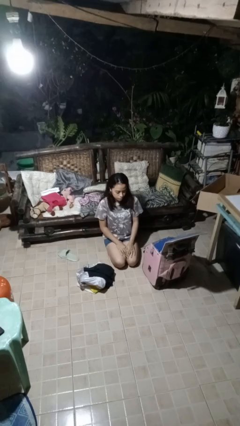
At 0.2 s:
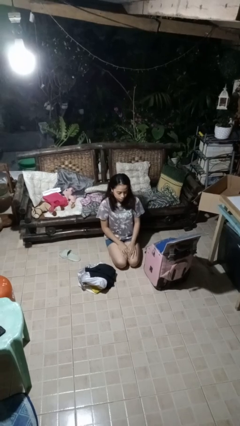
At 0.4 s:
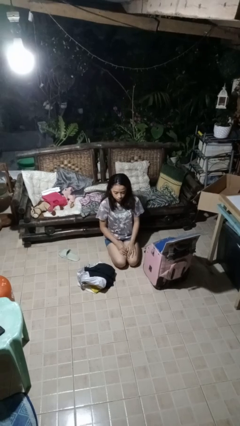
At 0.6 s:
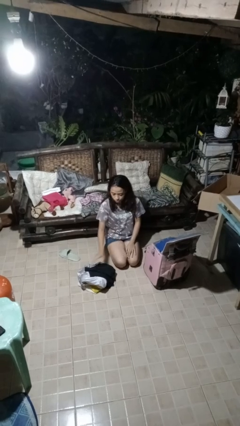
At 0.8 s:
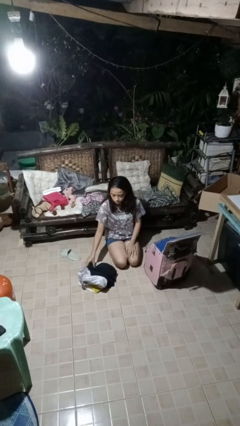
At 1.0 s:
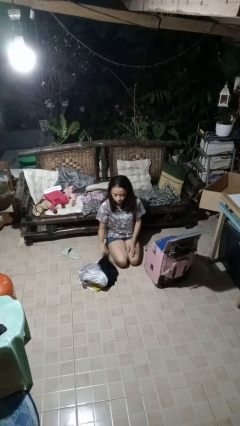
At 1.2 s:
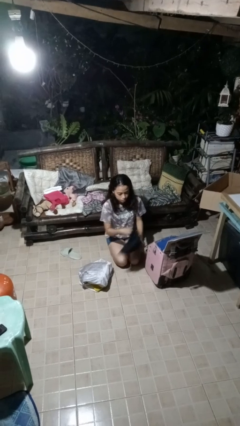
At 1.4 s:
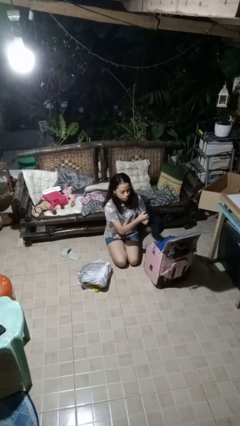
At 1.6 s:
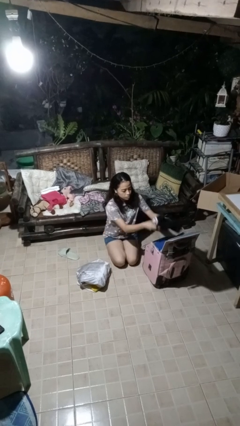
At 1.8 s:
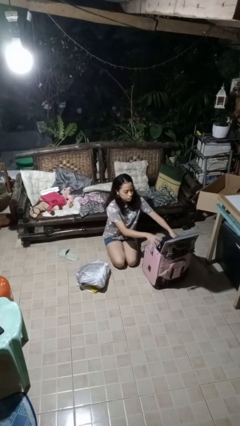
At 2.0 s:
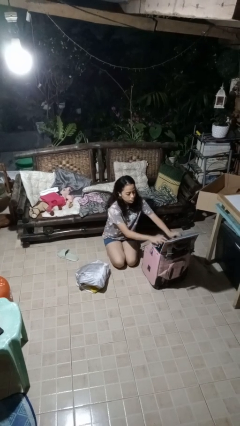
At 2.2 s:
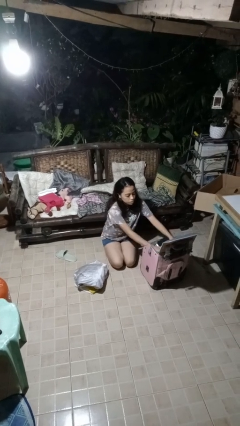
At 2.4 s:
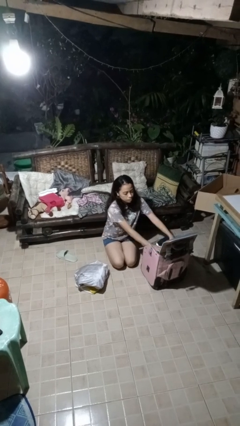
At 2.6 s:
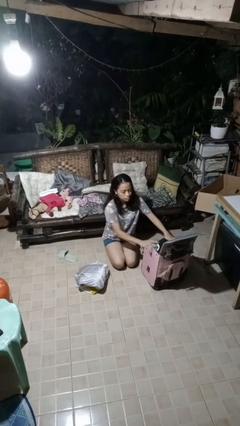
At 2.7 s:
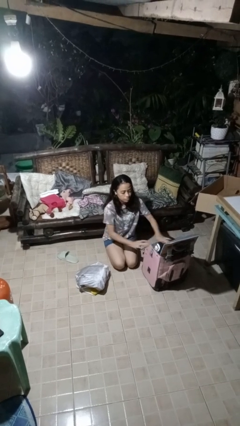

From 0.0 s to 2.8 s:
person loads clothes into suitcase

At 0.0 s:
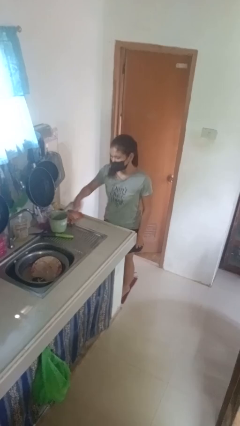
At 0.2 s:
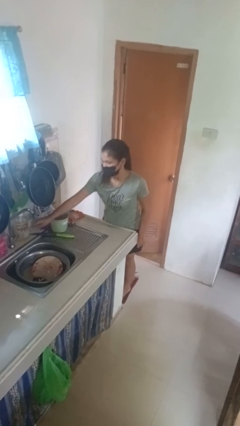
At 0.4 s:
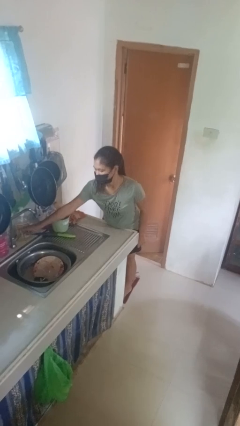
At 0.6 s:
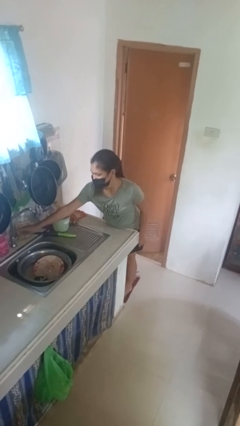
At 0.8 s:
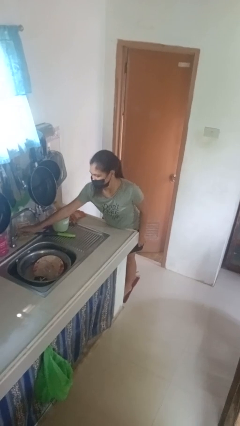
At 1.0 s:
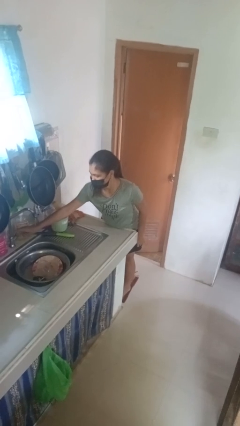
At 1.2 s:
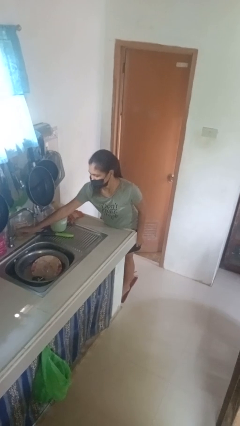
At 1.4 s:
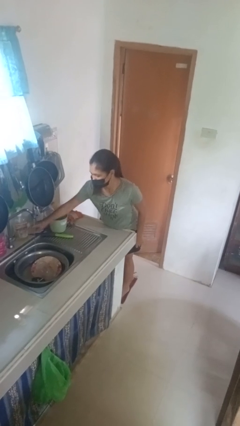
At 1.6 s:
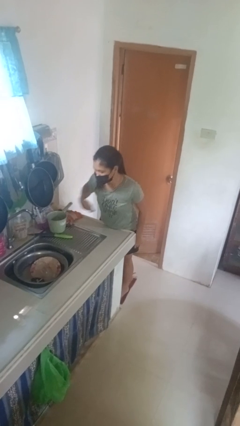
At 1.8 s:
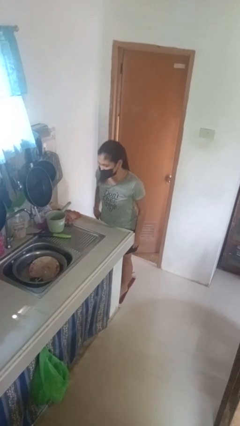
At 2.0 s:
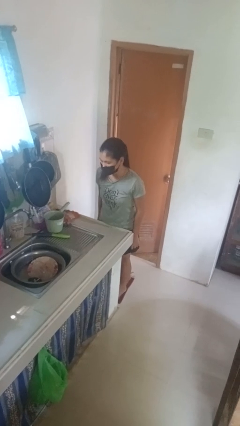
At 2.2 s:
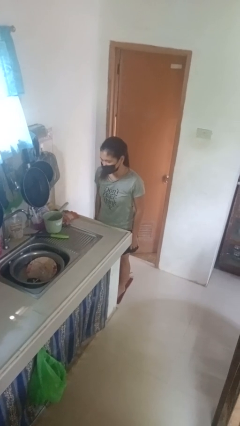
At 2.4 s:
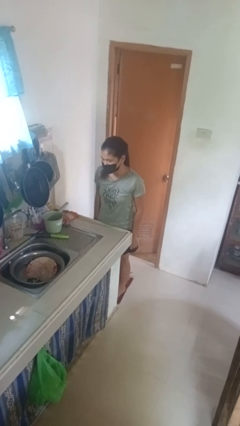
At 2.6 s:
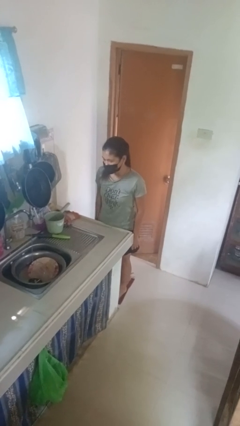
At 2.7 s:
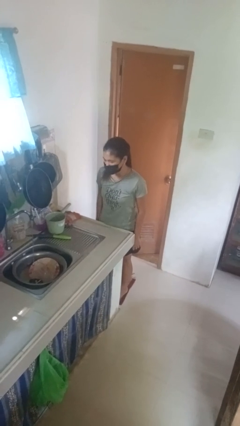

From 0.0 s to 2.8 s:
person turns on faucet

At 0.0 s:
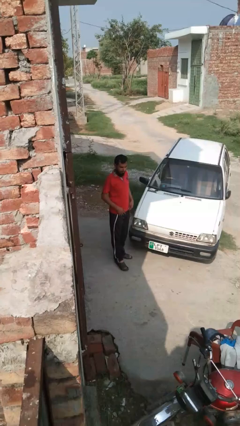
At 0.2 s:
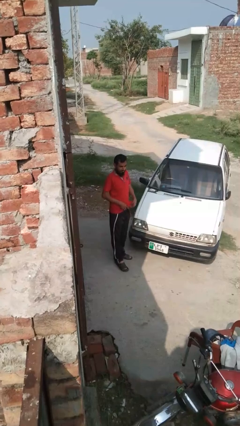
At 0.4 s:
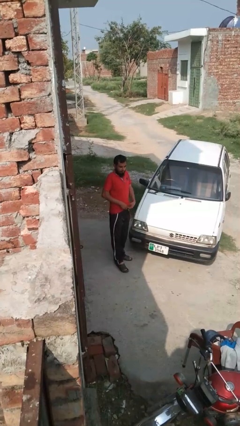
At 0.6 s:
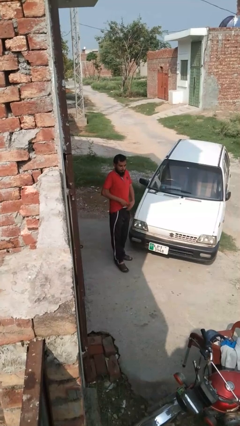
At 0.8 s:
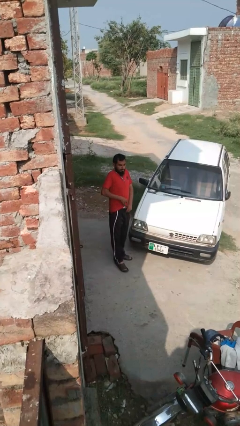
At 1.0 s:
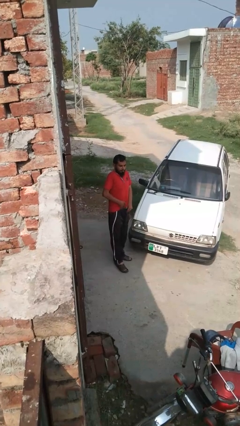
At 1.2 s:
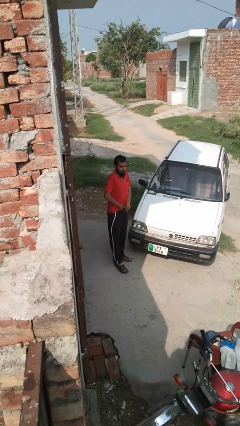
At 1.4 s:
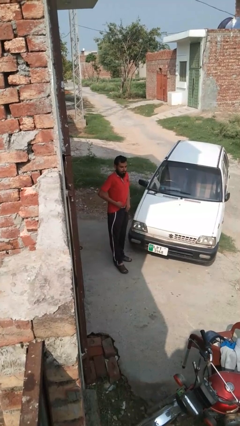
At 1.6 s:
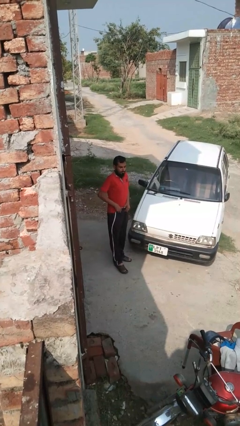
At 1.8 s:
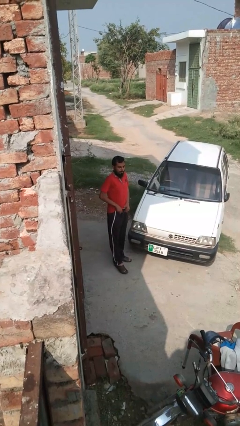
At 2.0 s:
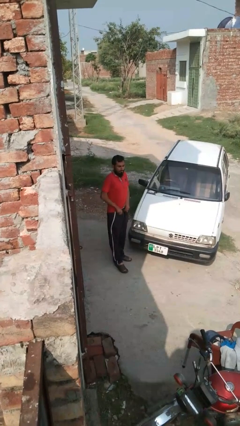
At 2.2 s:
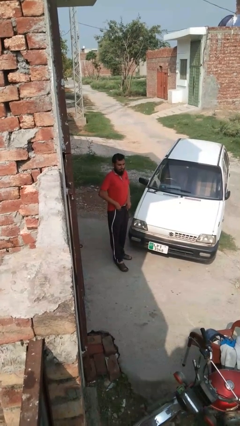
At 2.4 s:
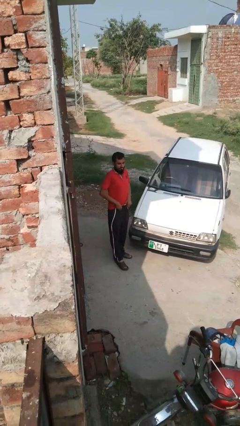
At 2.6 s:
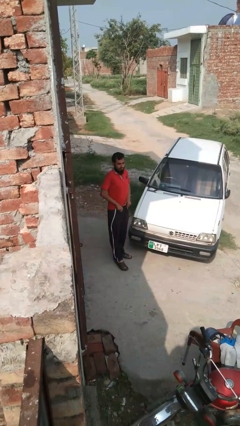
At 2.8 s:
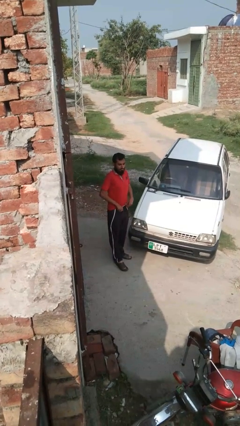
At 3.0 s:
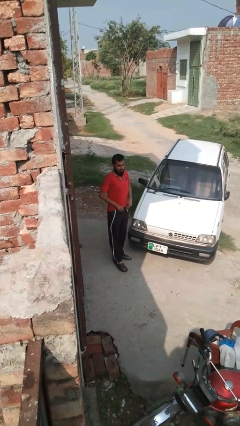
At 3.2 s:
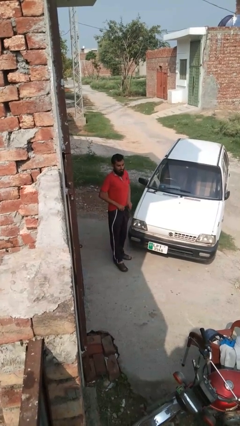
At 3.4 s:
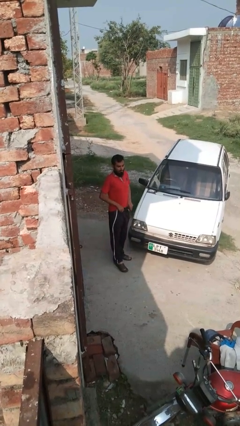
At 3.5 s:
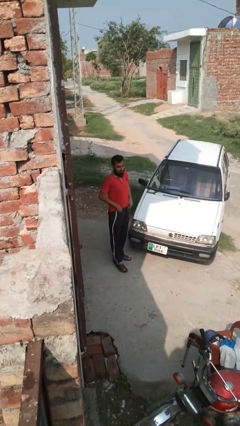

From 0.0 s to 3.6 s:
person tucks in shirt

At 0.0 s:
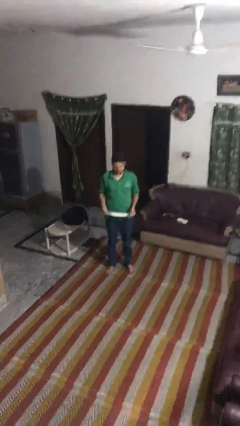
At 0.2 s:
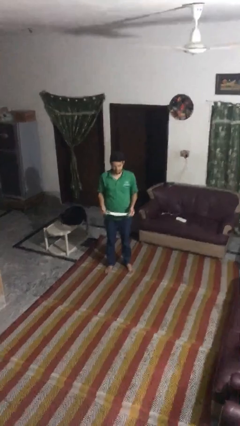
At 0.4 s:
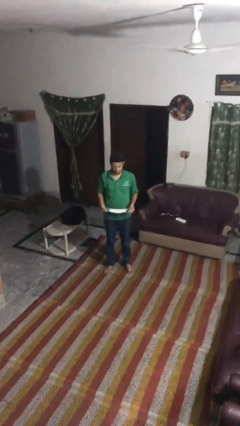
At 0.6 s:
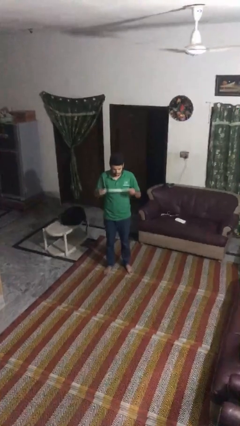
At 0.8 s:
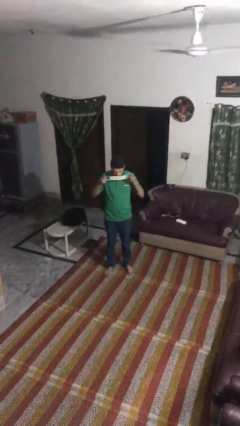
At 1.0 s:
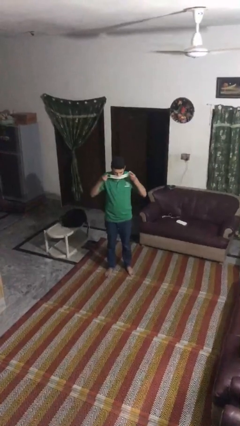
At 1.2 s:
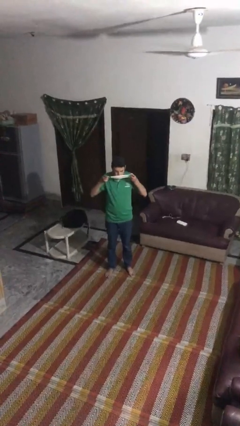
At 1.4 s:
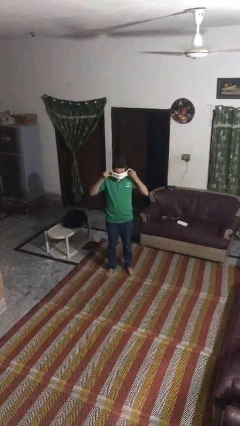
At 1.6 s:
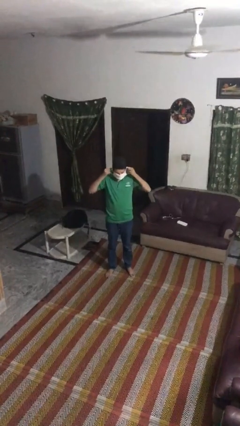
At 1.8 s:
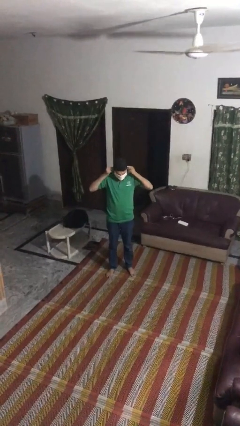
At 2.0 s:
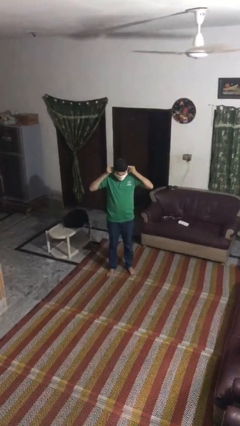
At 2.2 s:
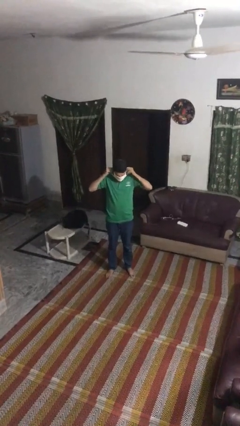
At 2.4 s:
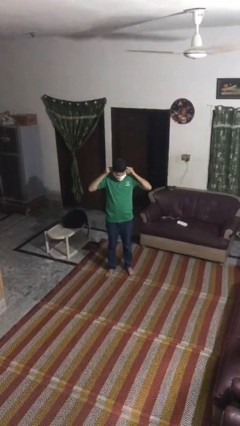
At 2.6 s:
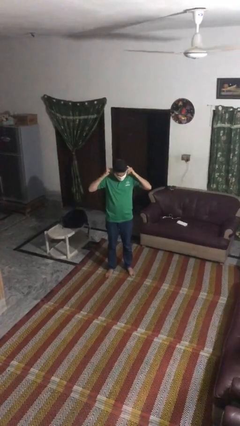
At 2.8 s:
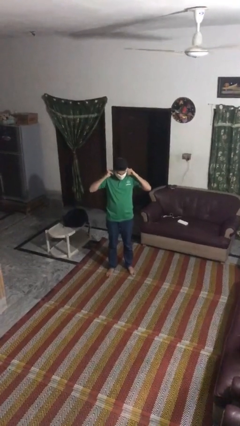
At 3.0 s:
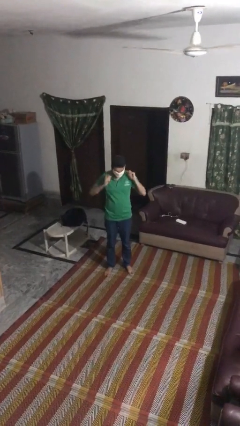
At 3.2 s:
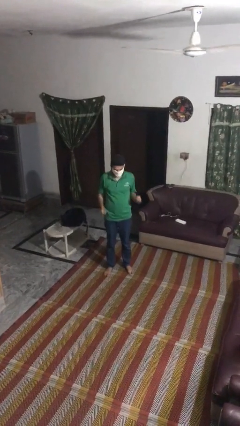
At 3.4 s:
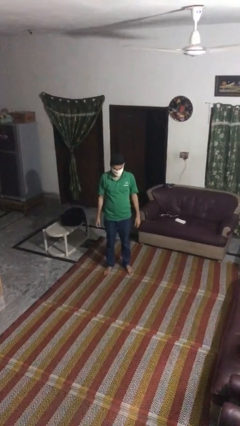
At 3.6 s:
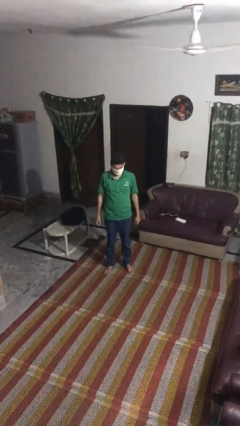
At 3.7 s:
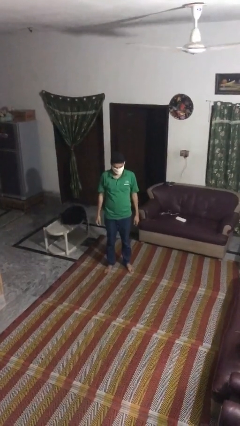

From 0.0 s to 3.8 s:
person puts on facemask

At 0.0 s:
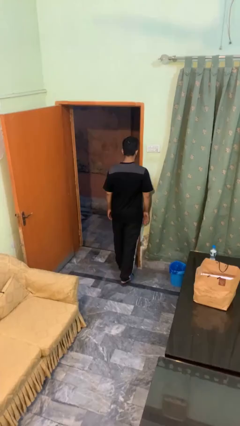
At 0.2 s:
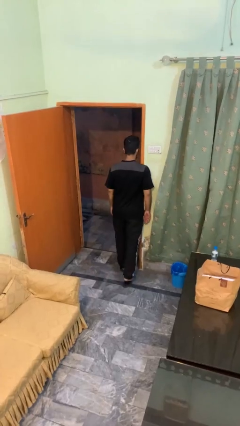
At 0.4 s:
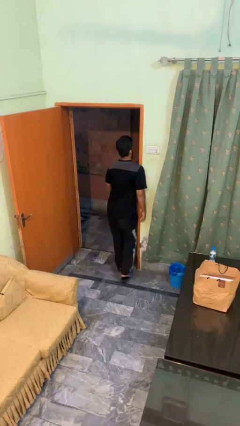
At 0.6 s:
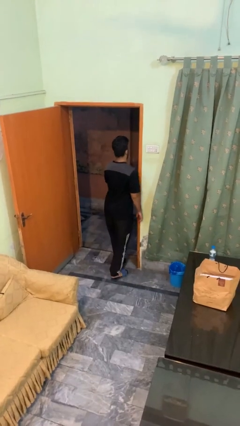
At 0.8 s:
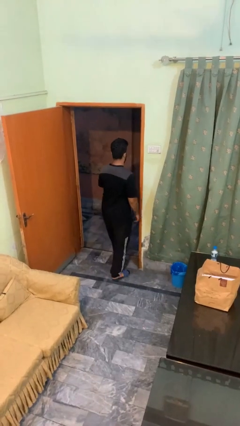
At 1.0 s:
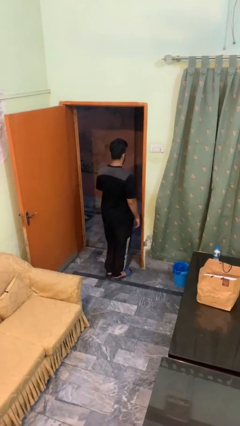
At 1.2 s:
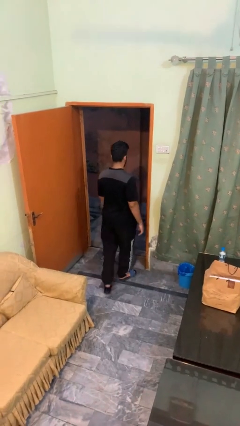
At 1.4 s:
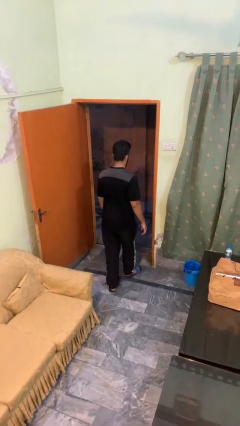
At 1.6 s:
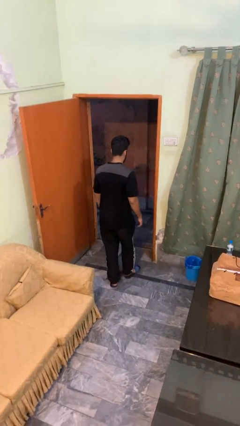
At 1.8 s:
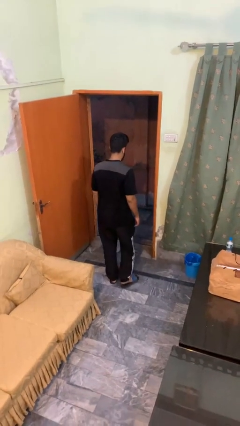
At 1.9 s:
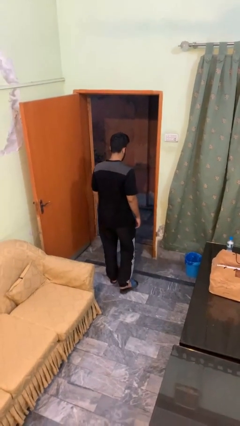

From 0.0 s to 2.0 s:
person bumps into wall

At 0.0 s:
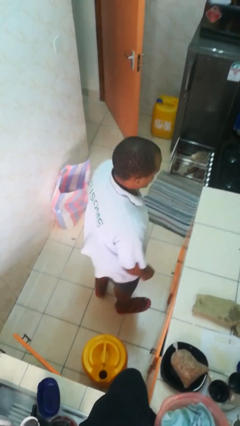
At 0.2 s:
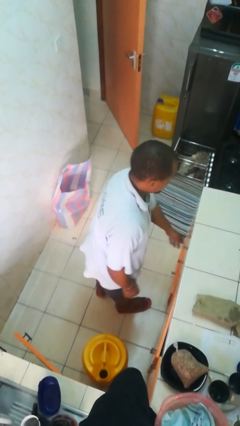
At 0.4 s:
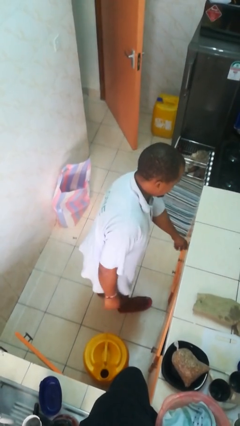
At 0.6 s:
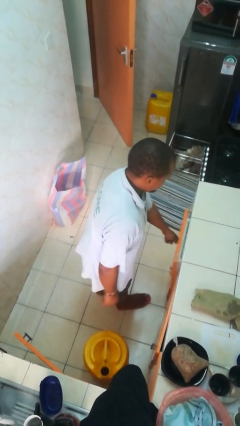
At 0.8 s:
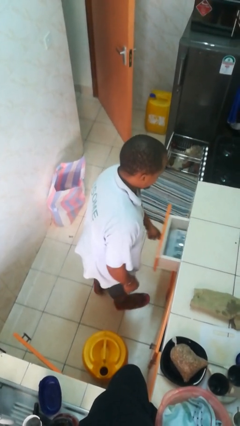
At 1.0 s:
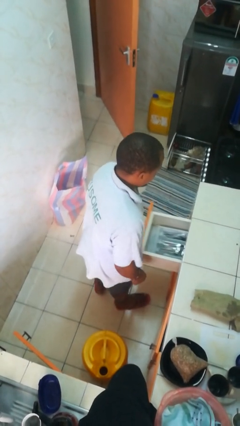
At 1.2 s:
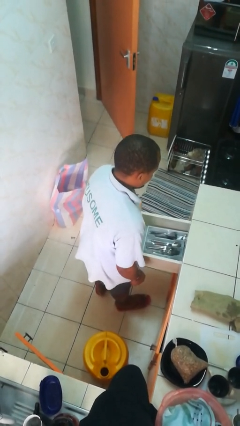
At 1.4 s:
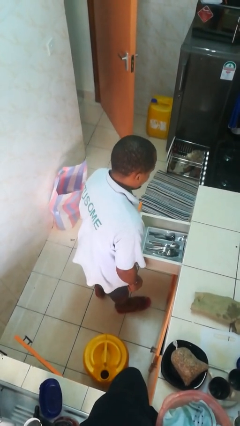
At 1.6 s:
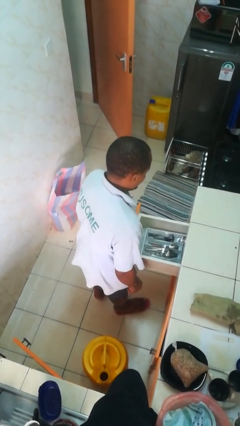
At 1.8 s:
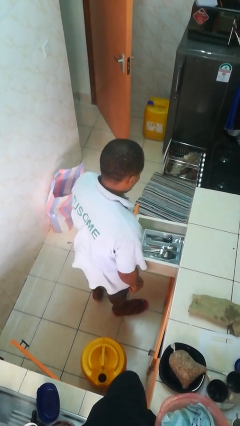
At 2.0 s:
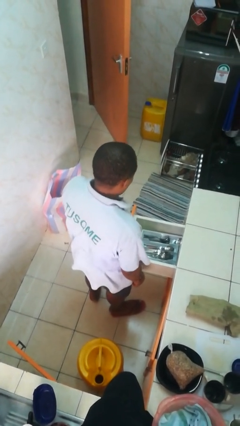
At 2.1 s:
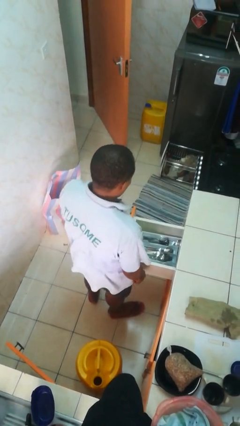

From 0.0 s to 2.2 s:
person opens kitchen drawer

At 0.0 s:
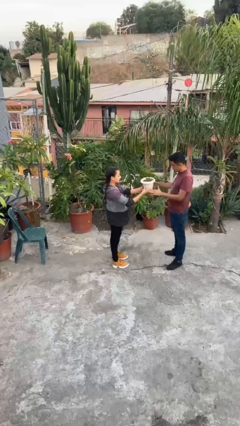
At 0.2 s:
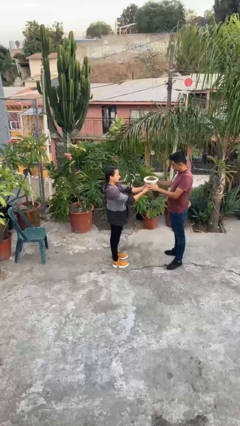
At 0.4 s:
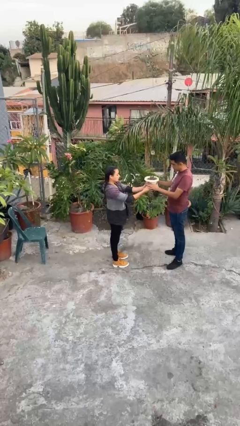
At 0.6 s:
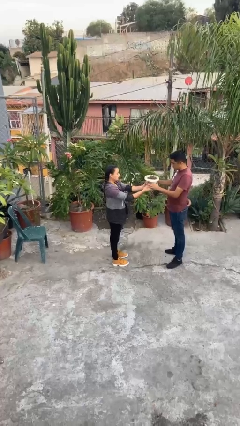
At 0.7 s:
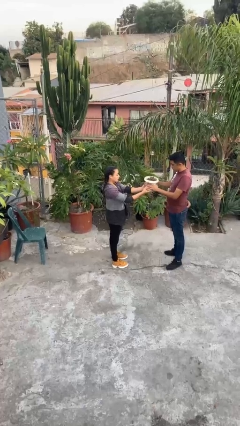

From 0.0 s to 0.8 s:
person transfers object to person
